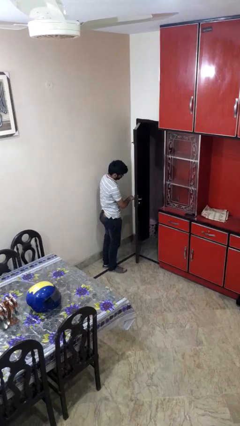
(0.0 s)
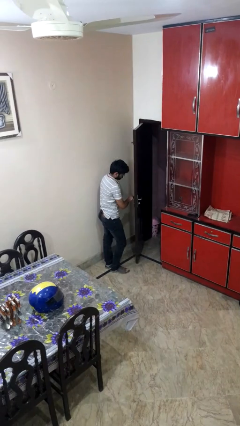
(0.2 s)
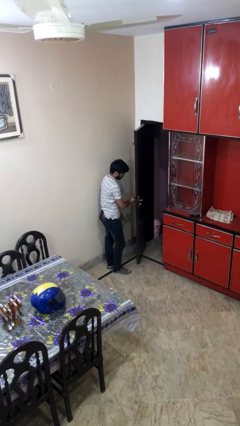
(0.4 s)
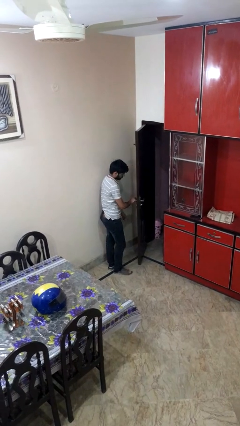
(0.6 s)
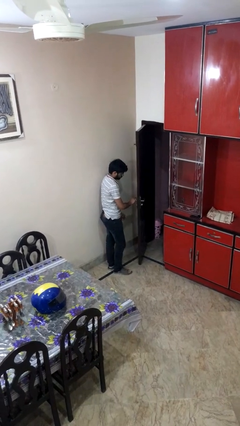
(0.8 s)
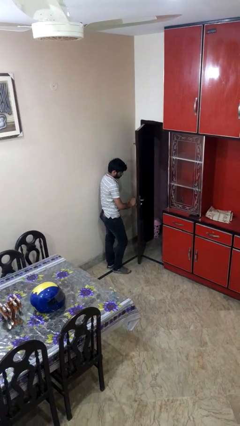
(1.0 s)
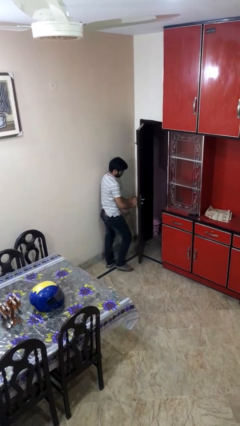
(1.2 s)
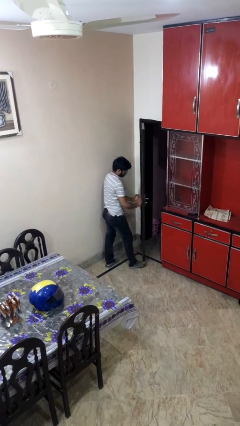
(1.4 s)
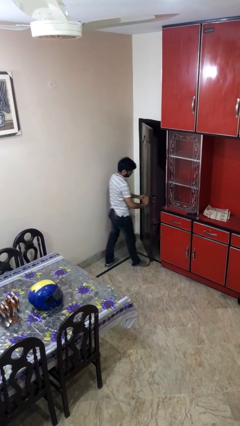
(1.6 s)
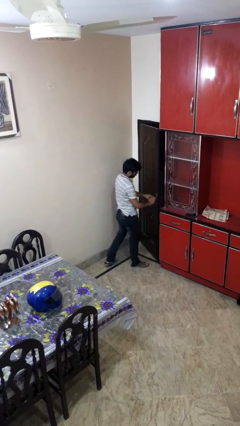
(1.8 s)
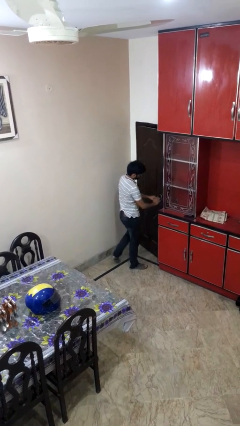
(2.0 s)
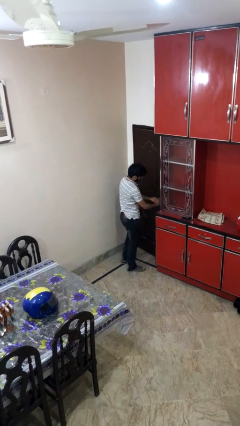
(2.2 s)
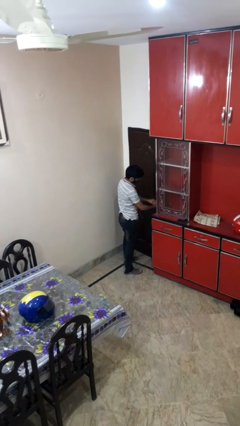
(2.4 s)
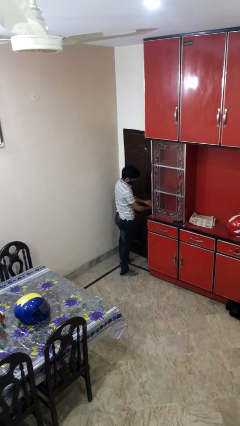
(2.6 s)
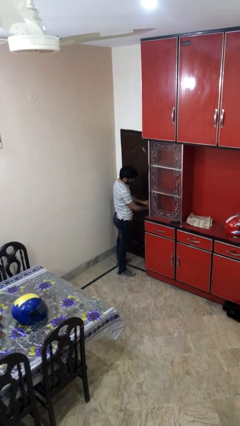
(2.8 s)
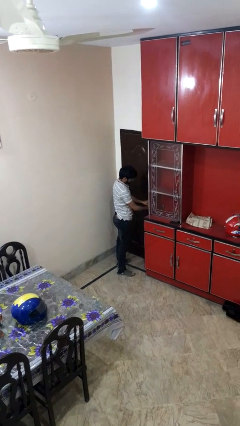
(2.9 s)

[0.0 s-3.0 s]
person closes facility door

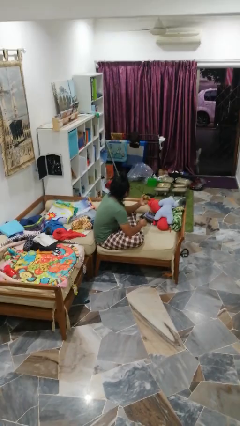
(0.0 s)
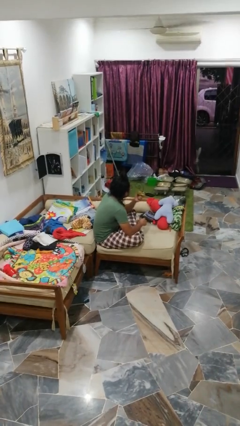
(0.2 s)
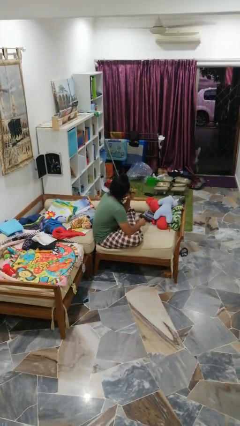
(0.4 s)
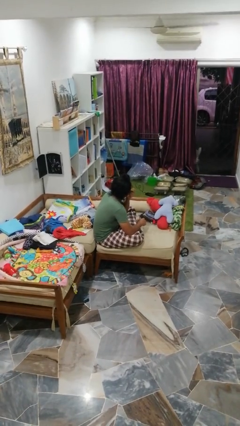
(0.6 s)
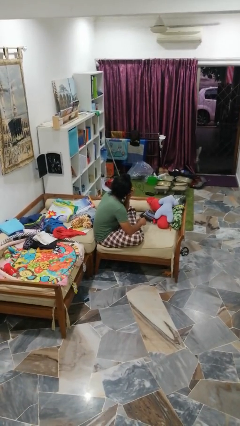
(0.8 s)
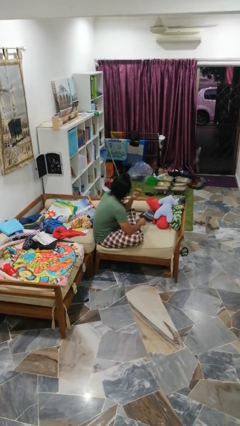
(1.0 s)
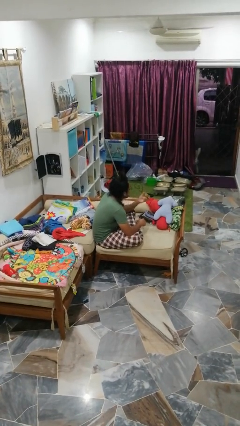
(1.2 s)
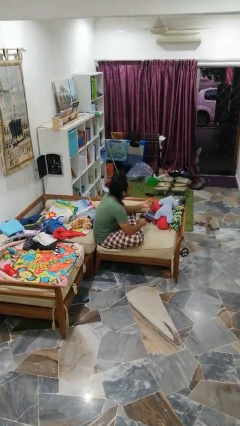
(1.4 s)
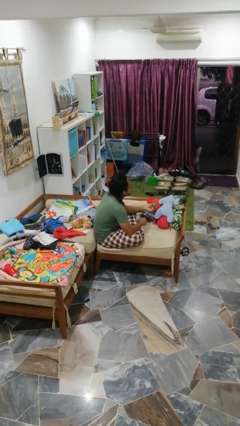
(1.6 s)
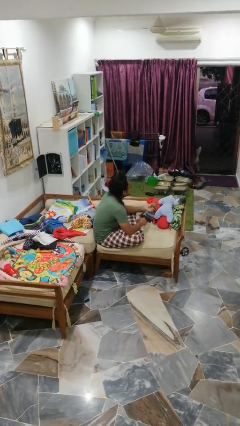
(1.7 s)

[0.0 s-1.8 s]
person eats apple

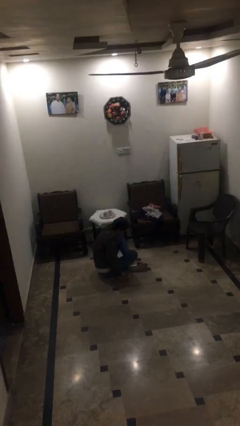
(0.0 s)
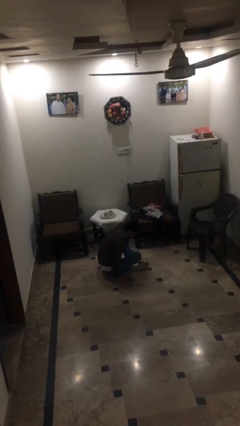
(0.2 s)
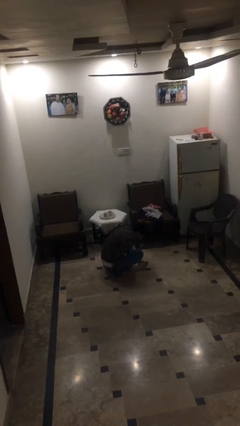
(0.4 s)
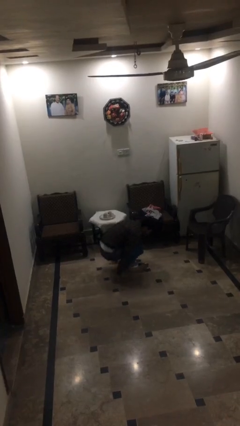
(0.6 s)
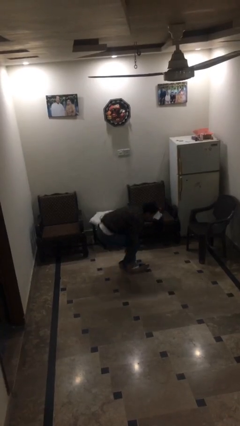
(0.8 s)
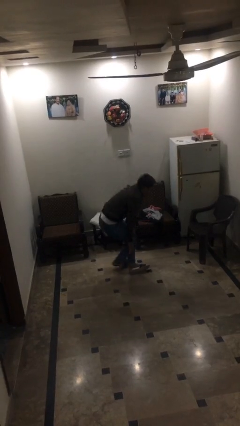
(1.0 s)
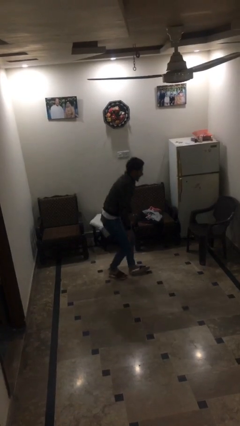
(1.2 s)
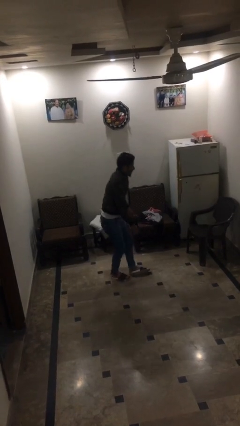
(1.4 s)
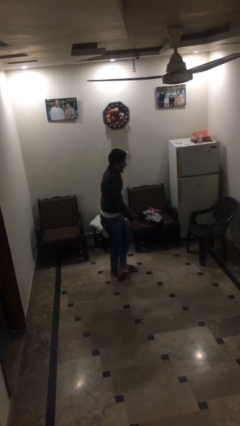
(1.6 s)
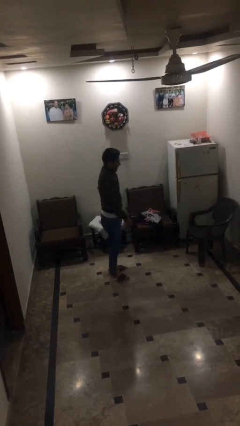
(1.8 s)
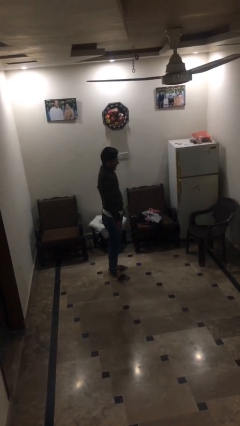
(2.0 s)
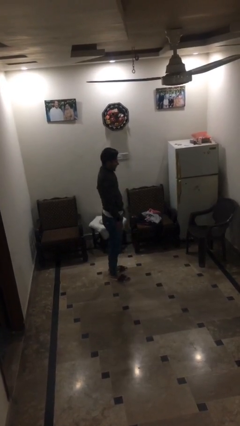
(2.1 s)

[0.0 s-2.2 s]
person stands up

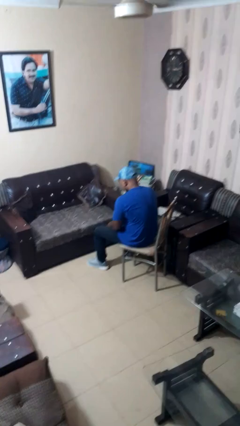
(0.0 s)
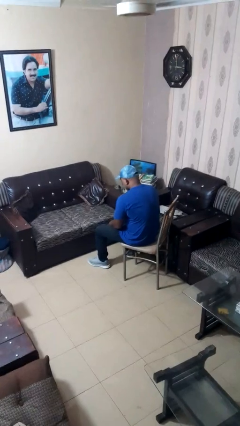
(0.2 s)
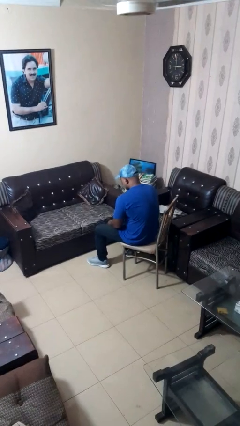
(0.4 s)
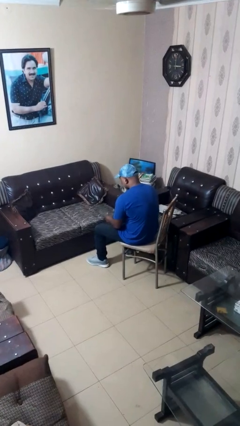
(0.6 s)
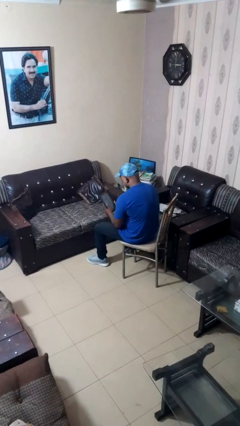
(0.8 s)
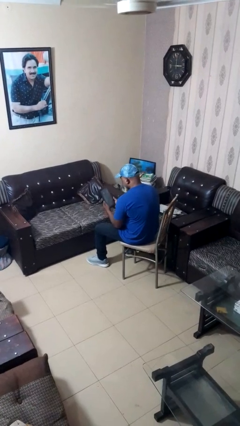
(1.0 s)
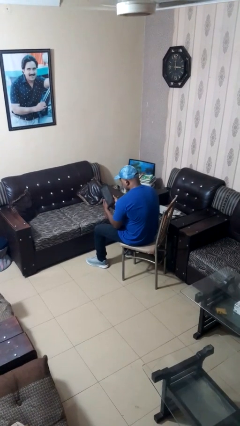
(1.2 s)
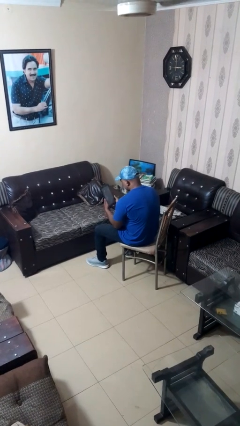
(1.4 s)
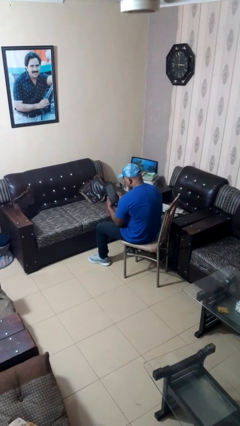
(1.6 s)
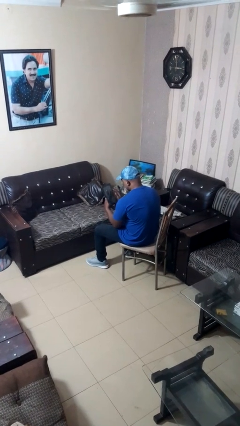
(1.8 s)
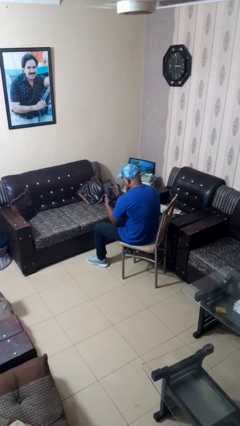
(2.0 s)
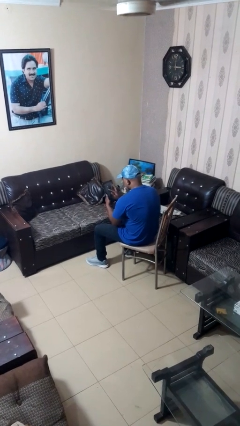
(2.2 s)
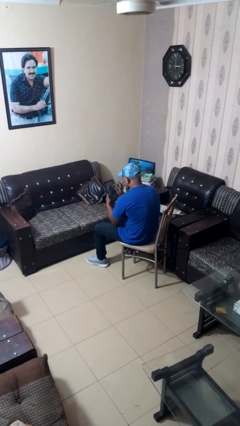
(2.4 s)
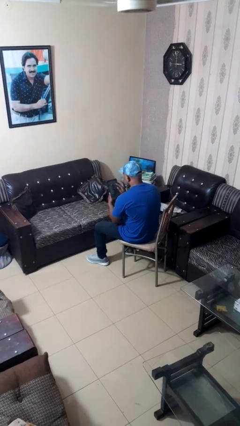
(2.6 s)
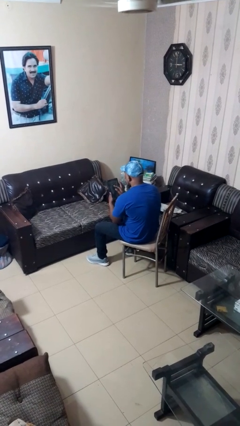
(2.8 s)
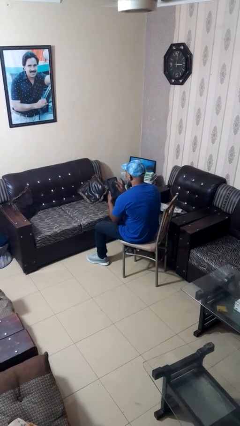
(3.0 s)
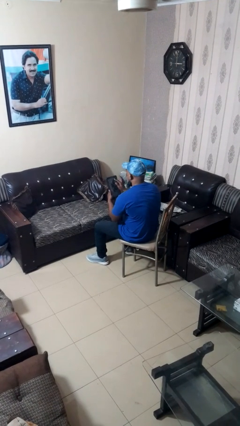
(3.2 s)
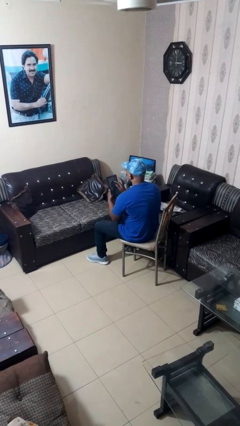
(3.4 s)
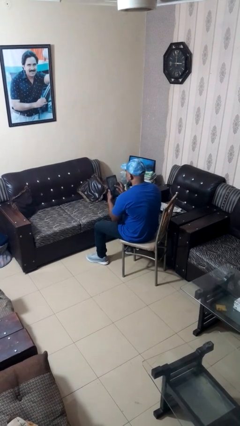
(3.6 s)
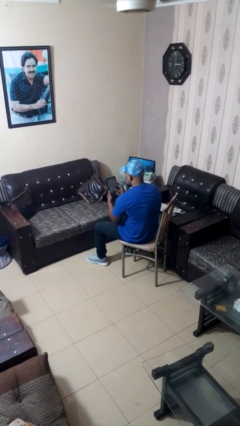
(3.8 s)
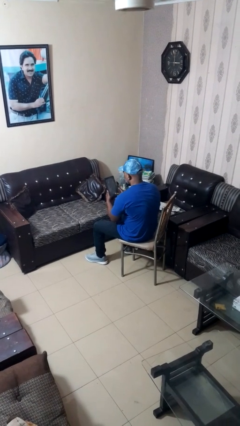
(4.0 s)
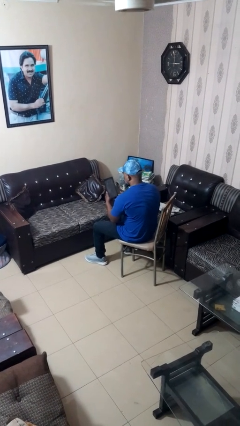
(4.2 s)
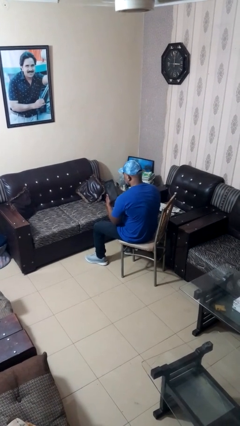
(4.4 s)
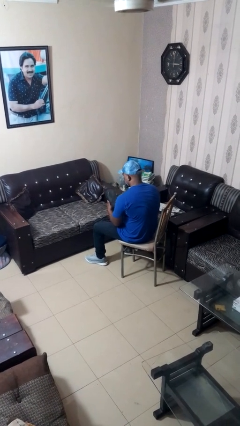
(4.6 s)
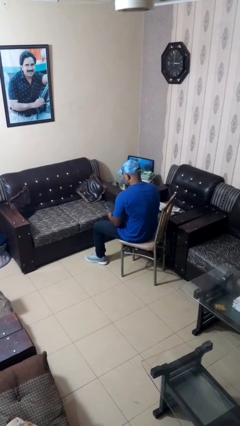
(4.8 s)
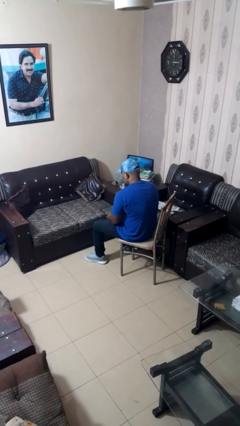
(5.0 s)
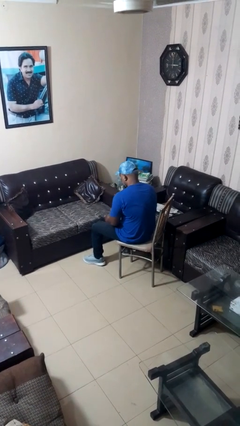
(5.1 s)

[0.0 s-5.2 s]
person interacts with tablet

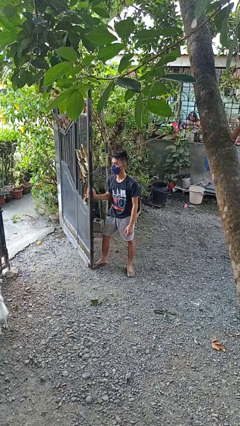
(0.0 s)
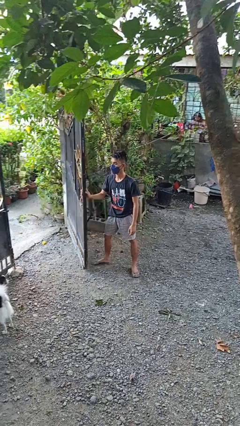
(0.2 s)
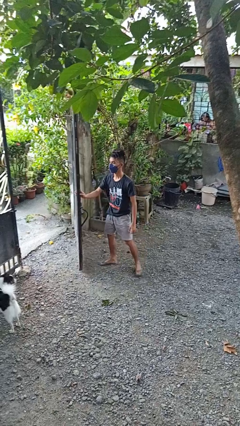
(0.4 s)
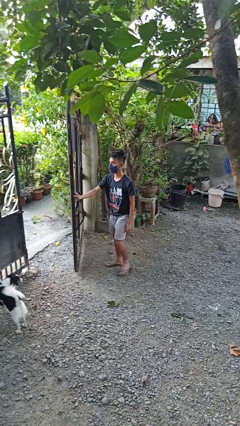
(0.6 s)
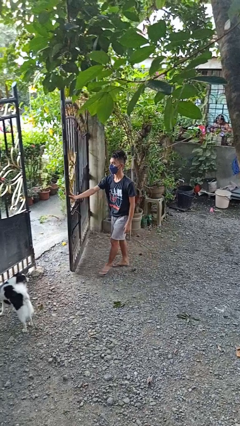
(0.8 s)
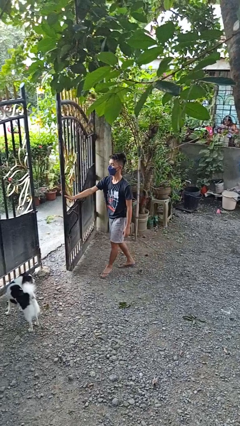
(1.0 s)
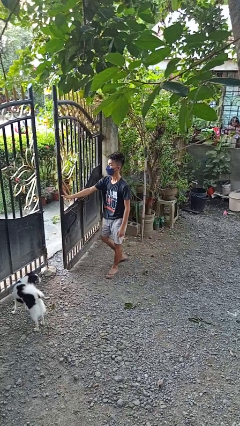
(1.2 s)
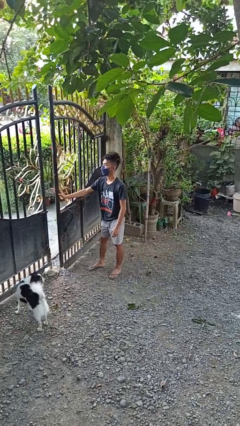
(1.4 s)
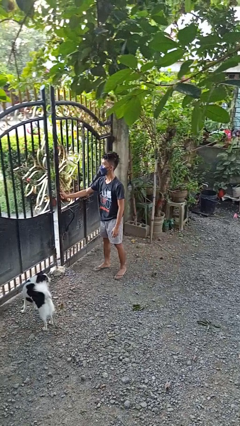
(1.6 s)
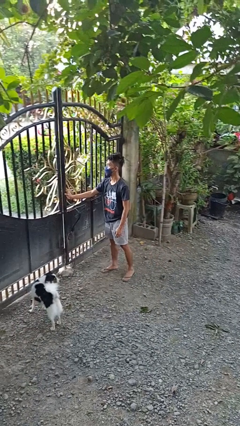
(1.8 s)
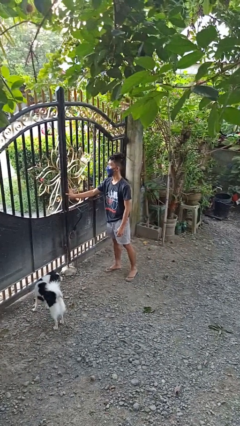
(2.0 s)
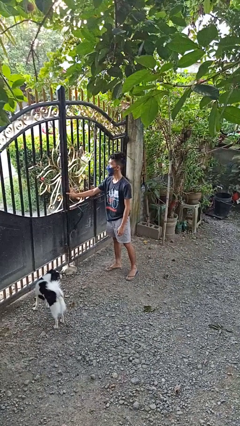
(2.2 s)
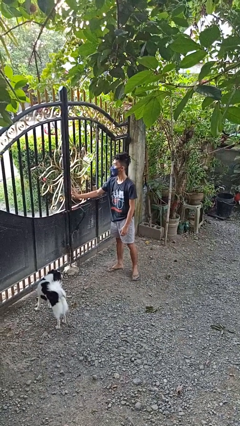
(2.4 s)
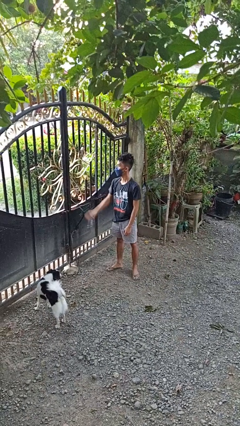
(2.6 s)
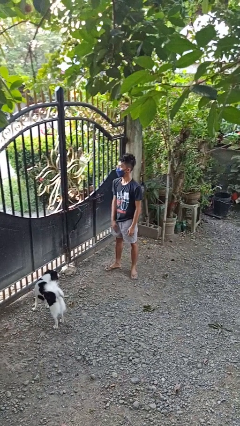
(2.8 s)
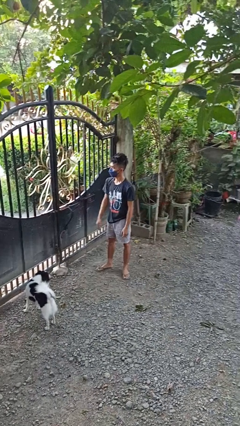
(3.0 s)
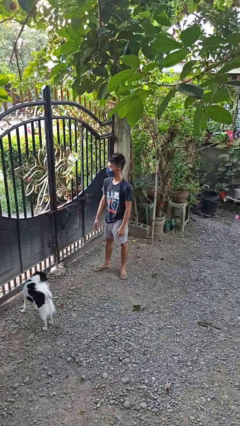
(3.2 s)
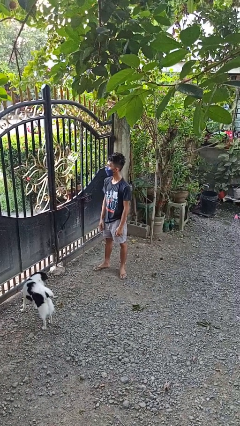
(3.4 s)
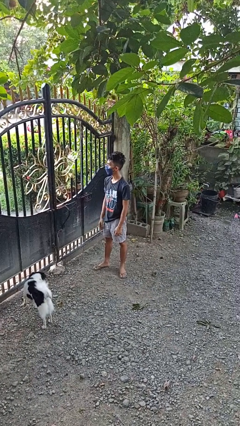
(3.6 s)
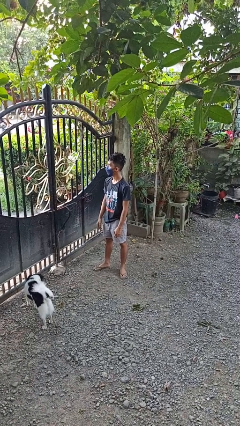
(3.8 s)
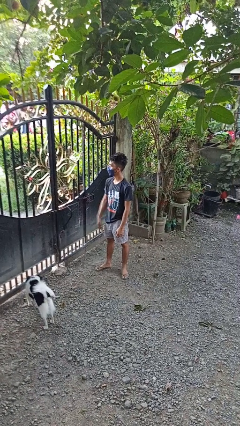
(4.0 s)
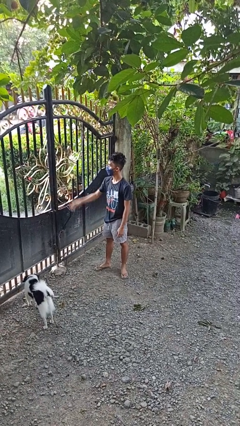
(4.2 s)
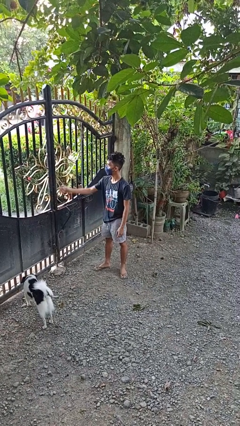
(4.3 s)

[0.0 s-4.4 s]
person closes gate

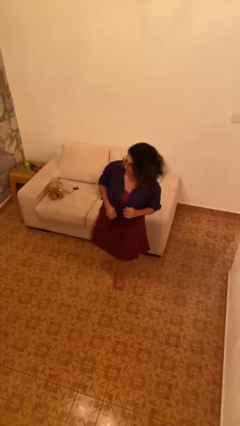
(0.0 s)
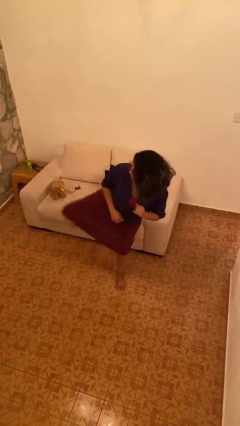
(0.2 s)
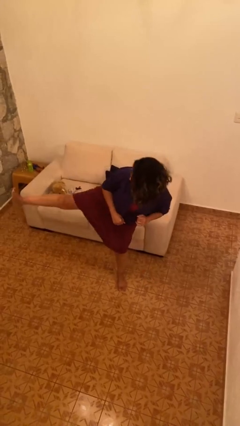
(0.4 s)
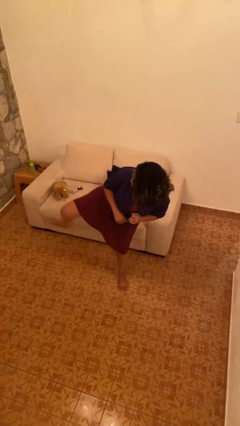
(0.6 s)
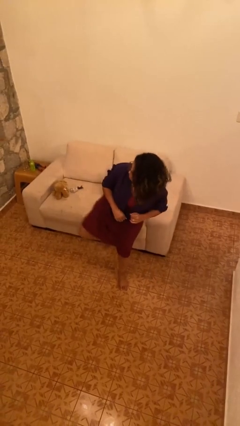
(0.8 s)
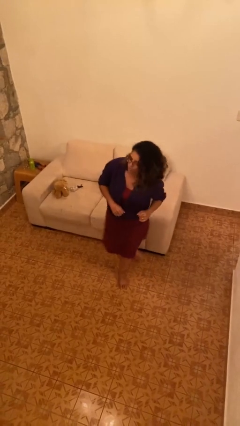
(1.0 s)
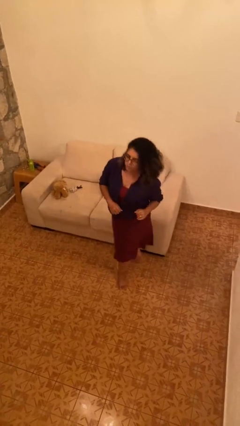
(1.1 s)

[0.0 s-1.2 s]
person karate kicks
